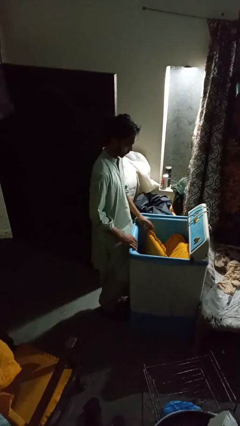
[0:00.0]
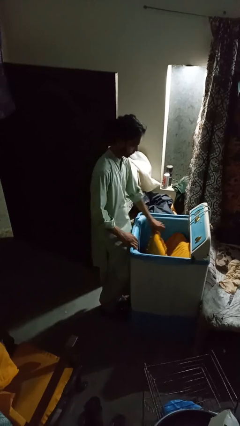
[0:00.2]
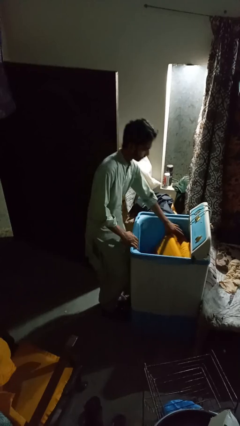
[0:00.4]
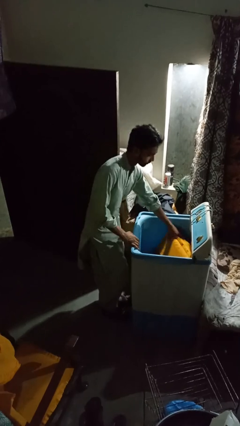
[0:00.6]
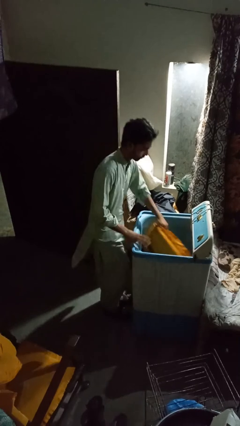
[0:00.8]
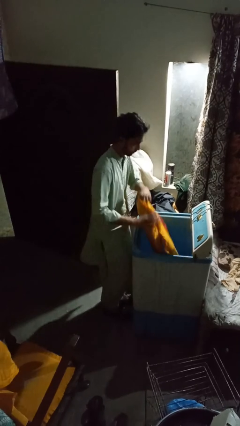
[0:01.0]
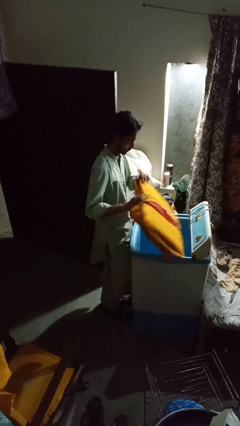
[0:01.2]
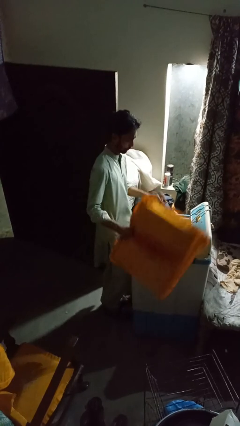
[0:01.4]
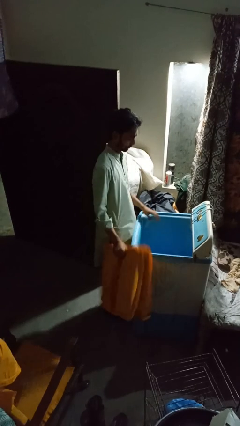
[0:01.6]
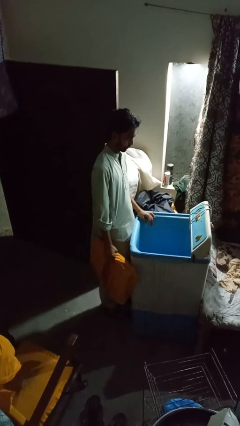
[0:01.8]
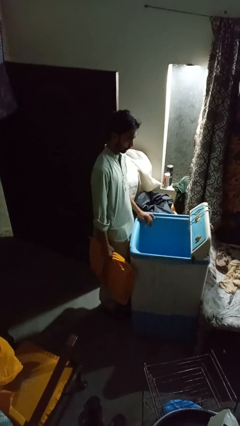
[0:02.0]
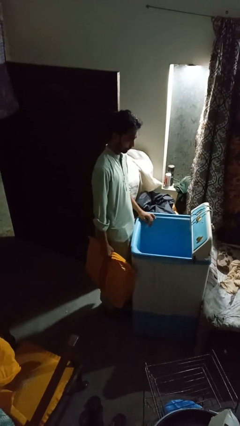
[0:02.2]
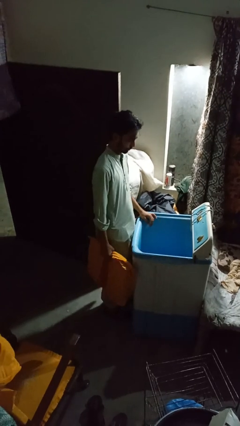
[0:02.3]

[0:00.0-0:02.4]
person unloads clotheswasher

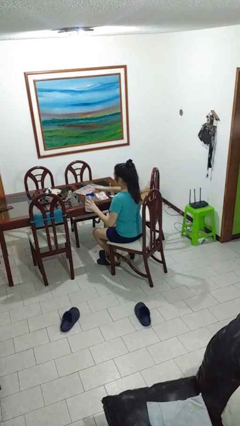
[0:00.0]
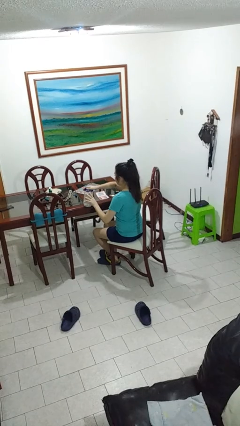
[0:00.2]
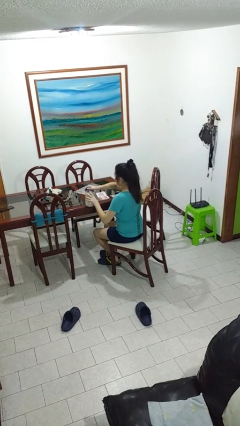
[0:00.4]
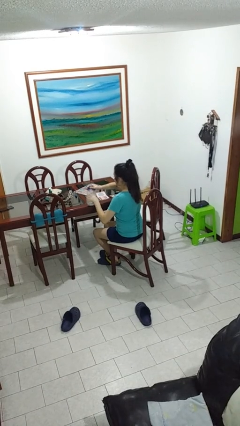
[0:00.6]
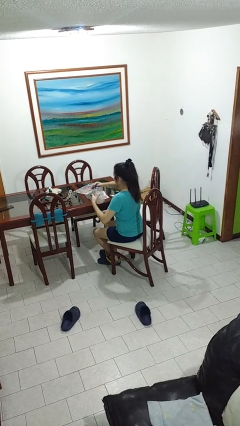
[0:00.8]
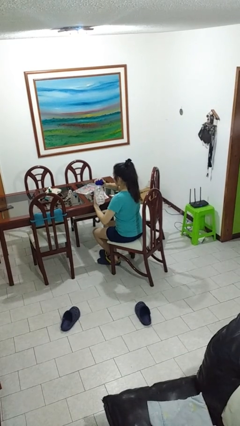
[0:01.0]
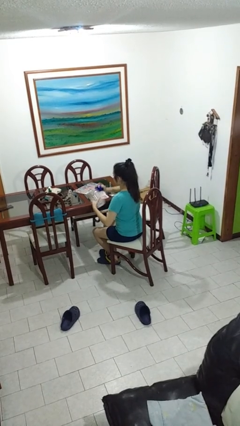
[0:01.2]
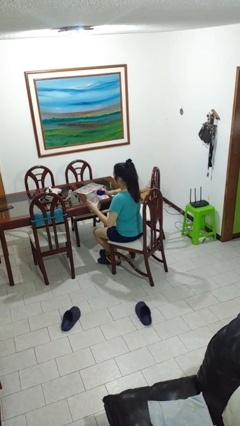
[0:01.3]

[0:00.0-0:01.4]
person opens jar

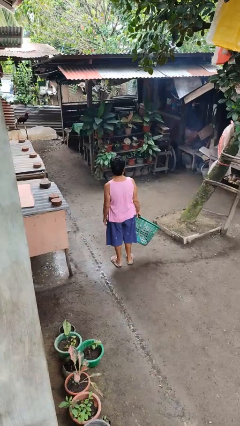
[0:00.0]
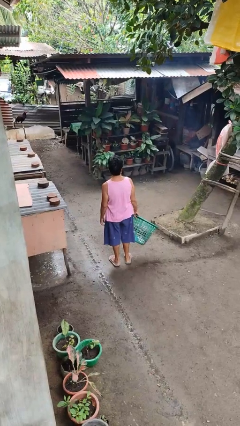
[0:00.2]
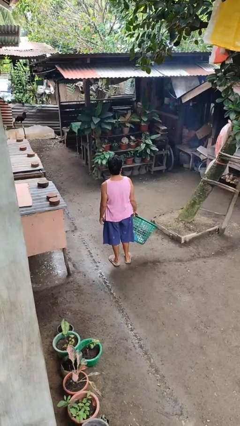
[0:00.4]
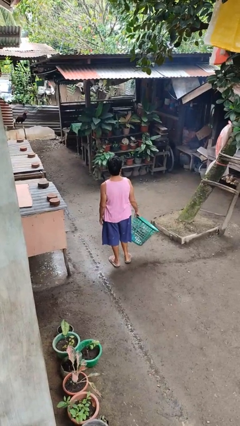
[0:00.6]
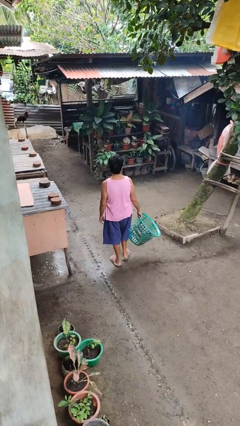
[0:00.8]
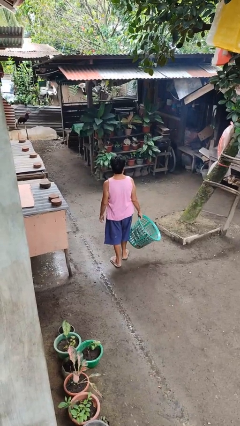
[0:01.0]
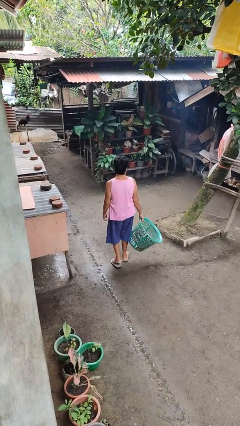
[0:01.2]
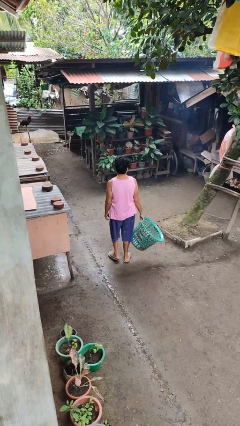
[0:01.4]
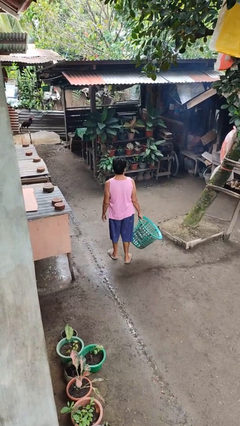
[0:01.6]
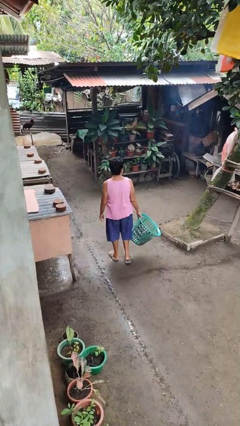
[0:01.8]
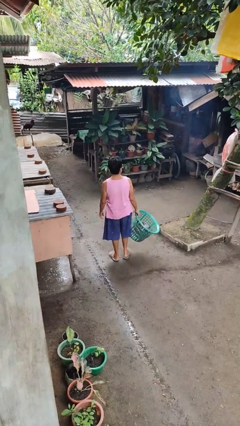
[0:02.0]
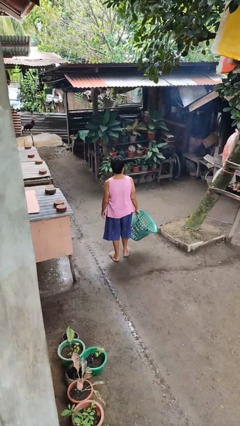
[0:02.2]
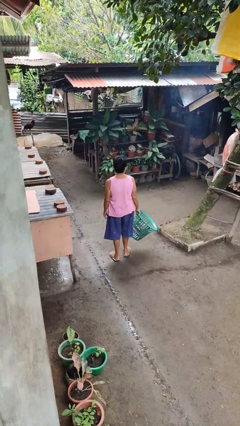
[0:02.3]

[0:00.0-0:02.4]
person carries laundry basket

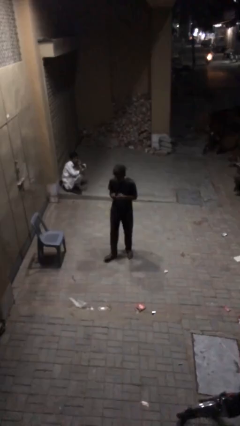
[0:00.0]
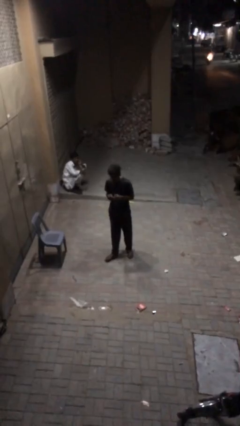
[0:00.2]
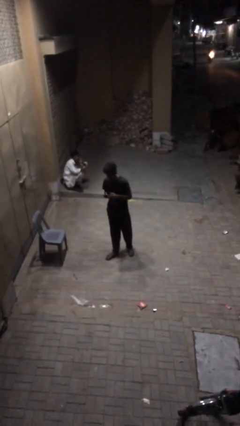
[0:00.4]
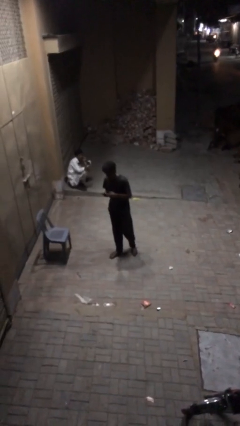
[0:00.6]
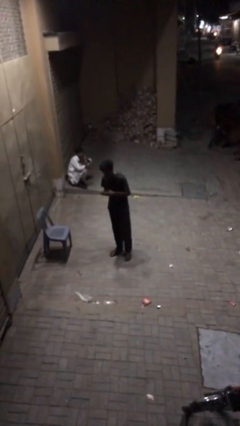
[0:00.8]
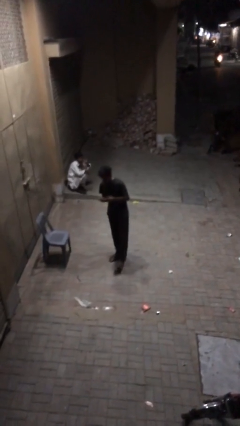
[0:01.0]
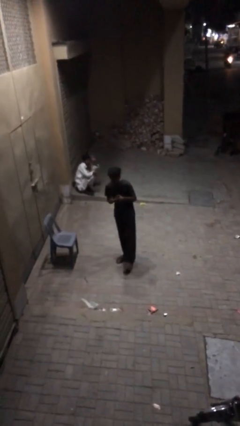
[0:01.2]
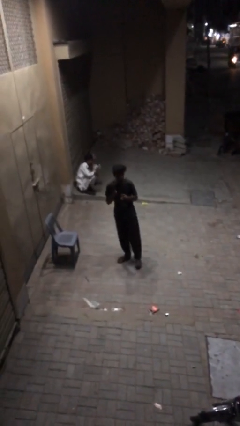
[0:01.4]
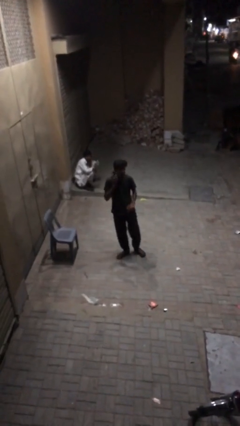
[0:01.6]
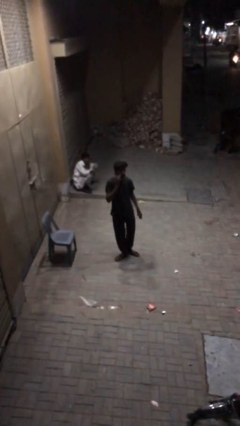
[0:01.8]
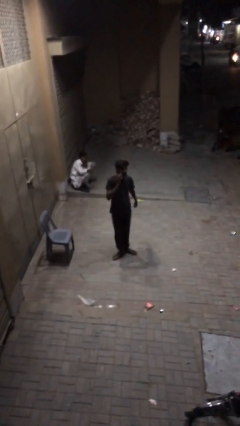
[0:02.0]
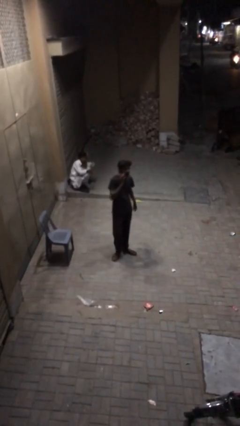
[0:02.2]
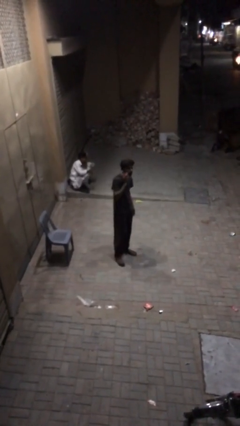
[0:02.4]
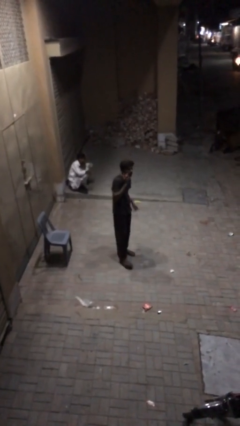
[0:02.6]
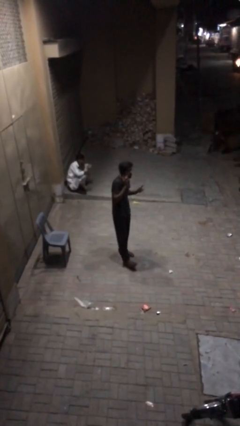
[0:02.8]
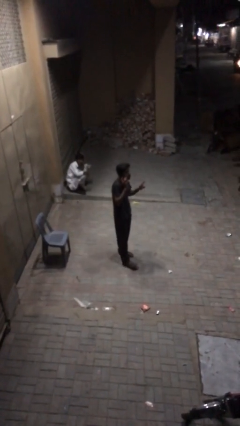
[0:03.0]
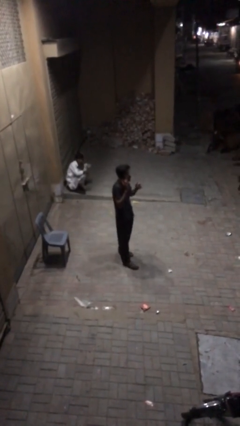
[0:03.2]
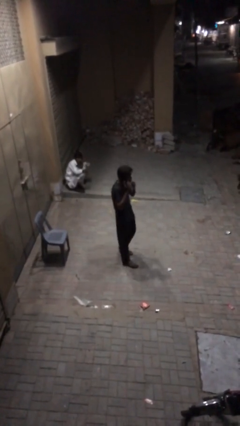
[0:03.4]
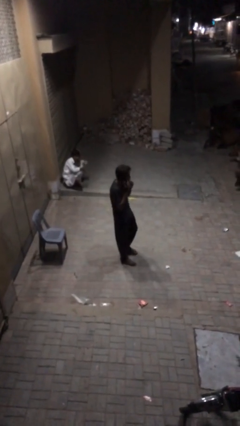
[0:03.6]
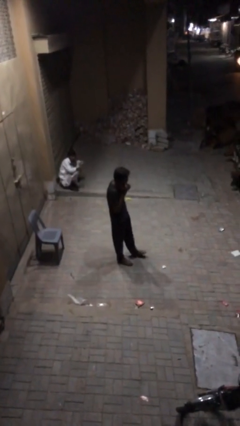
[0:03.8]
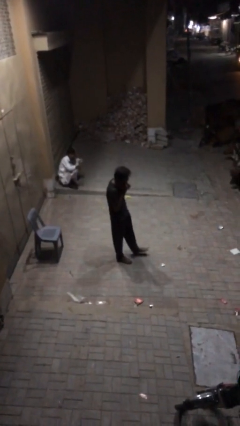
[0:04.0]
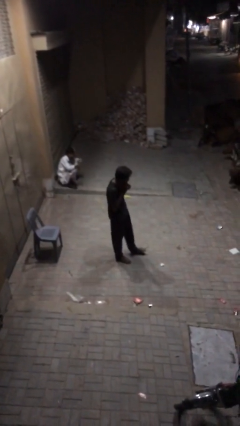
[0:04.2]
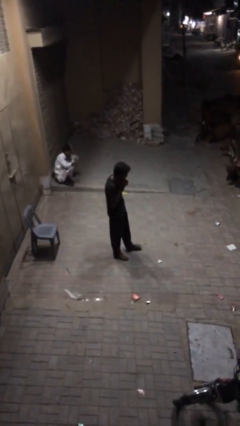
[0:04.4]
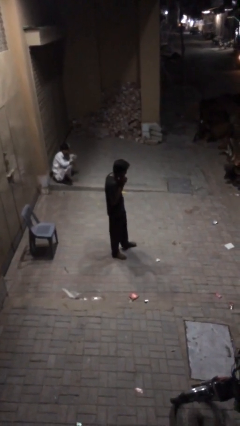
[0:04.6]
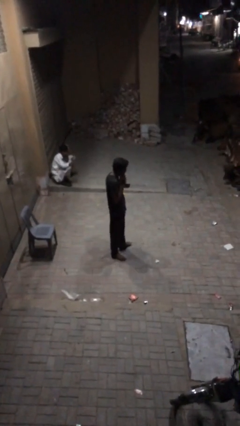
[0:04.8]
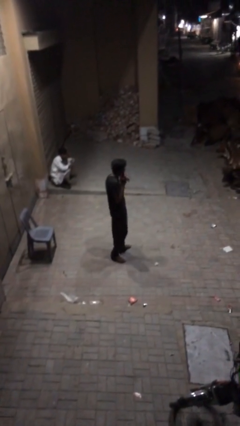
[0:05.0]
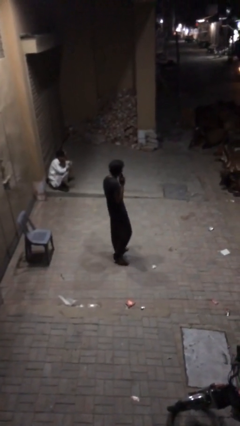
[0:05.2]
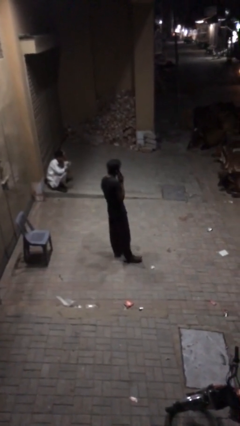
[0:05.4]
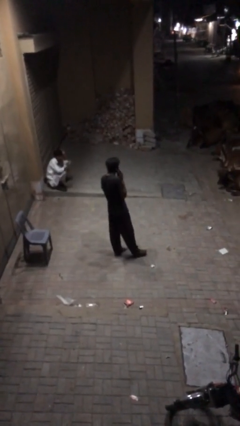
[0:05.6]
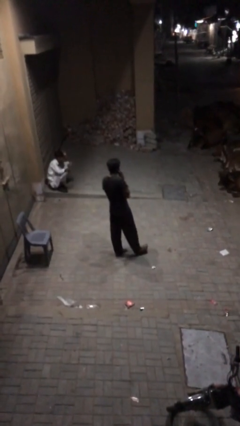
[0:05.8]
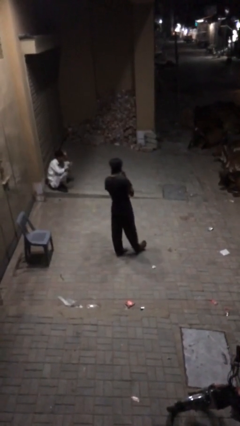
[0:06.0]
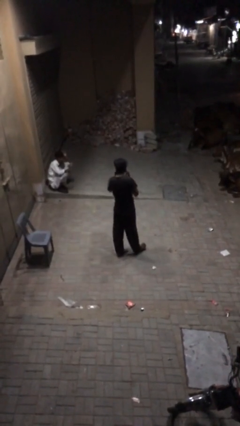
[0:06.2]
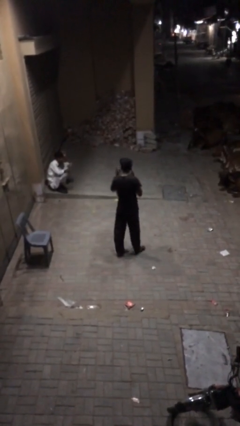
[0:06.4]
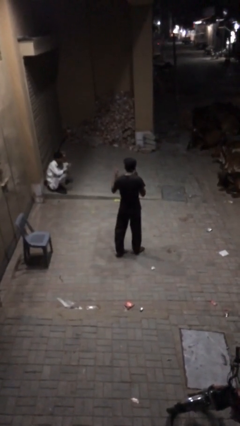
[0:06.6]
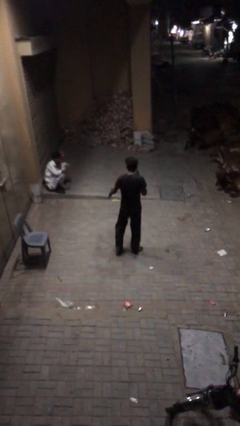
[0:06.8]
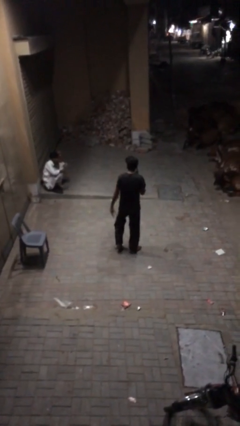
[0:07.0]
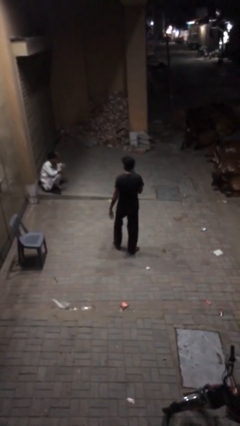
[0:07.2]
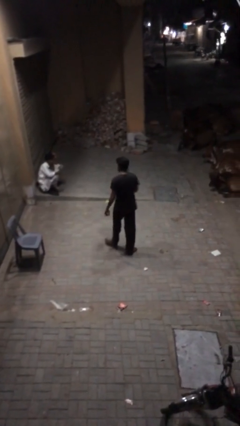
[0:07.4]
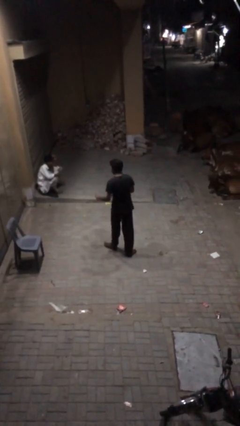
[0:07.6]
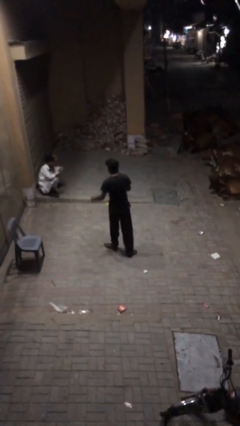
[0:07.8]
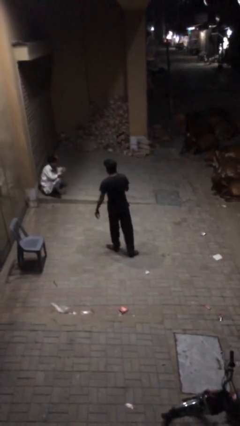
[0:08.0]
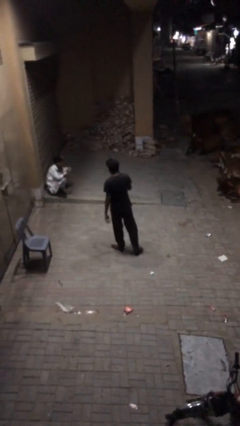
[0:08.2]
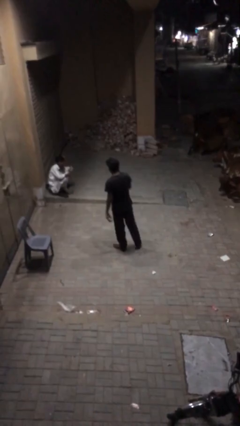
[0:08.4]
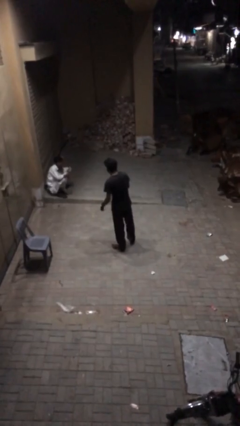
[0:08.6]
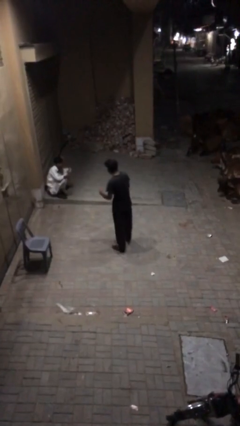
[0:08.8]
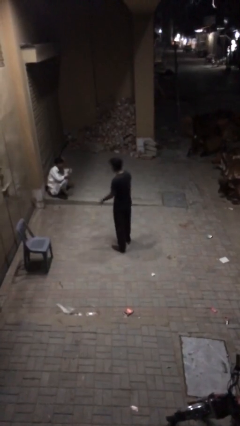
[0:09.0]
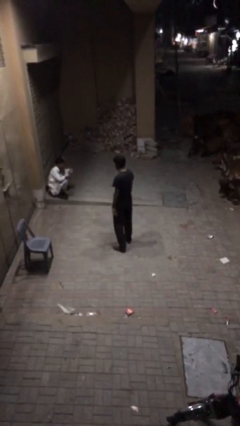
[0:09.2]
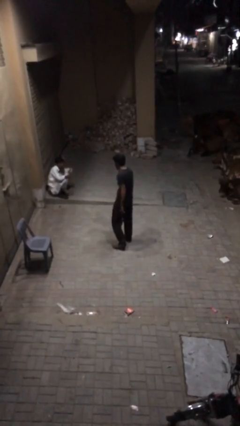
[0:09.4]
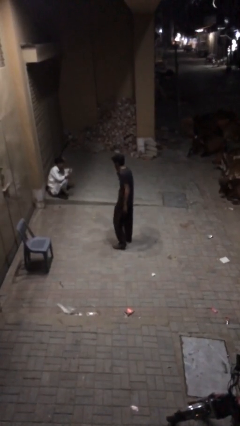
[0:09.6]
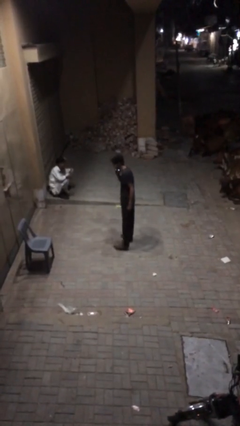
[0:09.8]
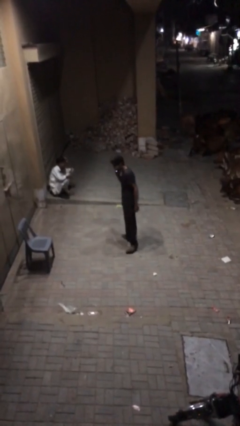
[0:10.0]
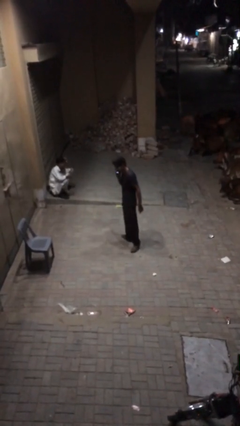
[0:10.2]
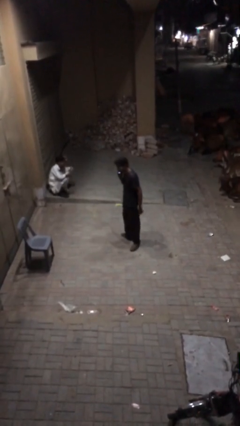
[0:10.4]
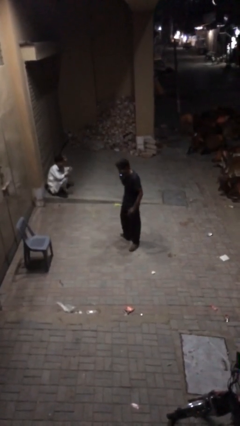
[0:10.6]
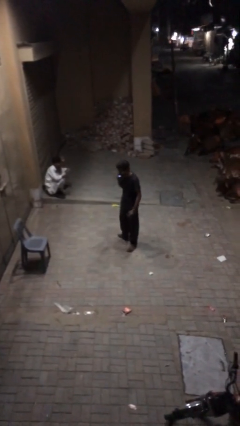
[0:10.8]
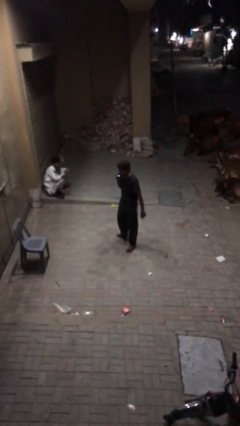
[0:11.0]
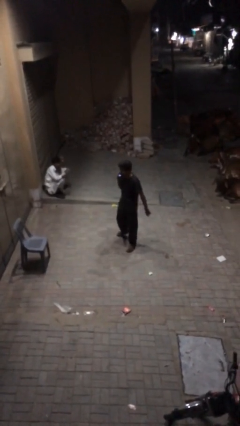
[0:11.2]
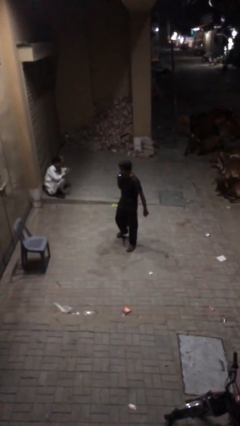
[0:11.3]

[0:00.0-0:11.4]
person talks on phone

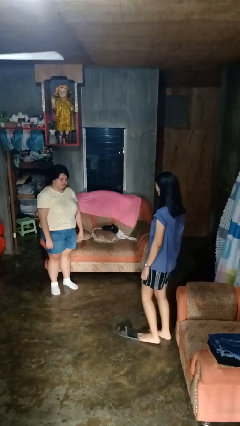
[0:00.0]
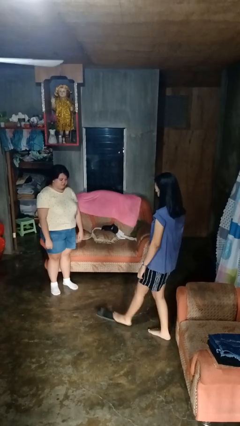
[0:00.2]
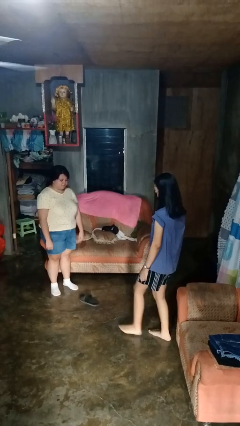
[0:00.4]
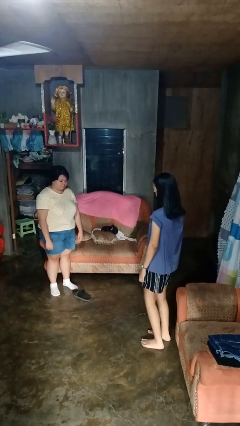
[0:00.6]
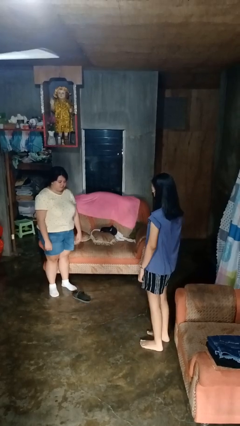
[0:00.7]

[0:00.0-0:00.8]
person kicks object to person
